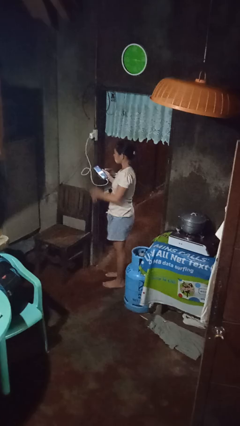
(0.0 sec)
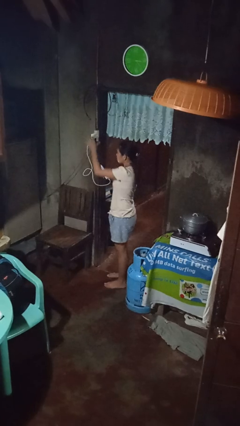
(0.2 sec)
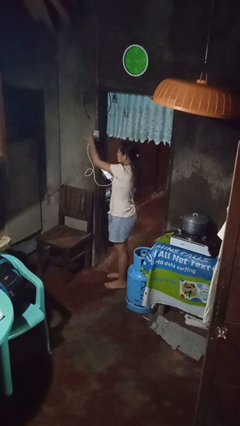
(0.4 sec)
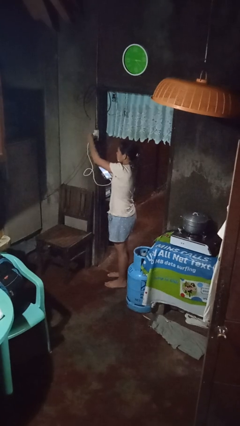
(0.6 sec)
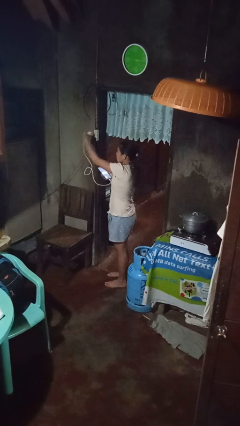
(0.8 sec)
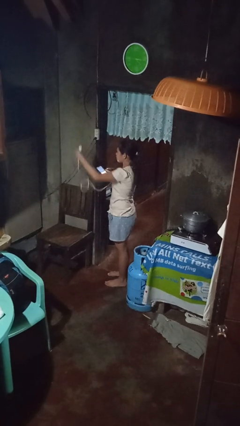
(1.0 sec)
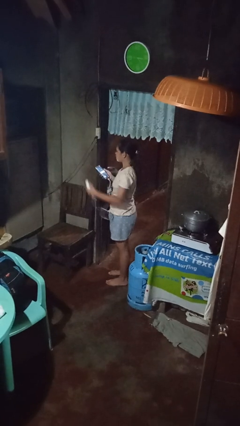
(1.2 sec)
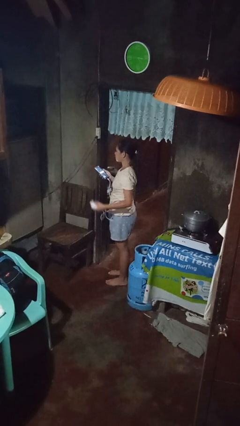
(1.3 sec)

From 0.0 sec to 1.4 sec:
person unplugs from electrical socket

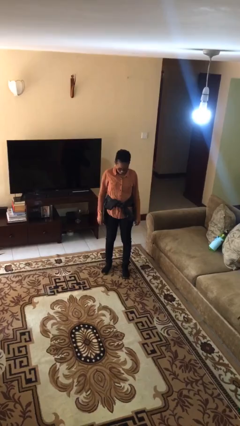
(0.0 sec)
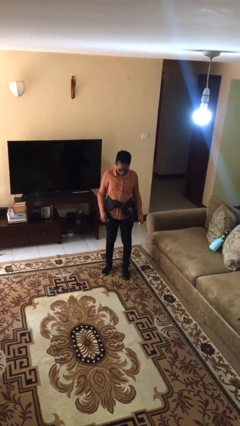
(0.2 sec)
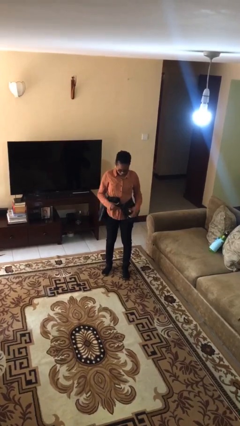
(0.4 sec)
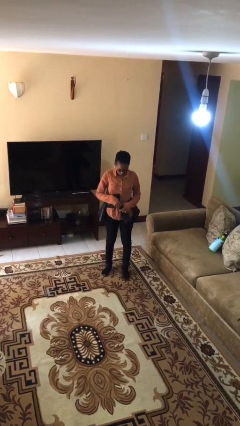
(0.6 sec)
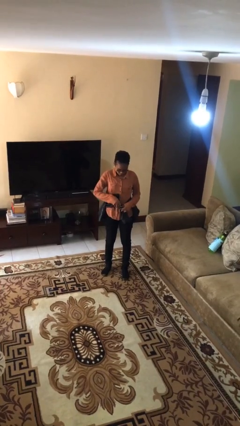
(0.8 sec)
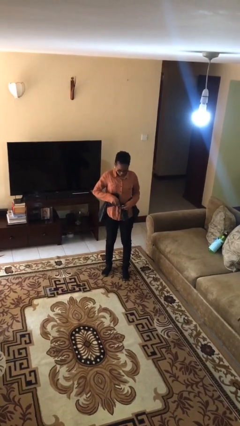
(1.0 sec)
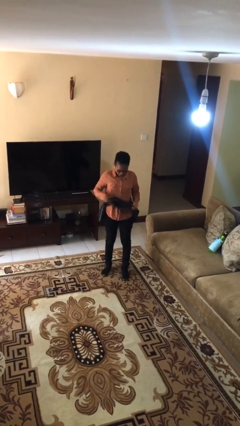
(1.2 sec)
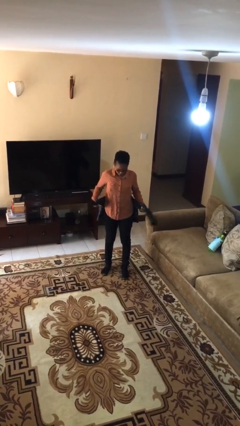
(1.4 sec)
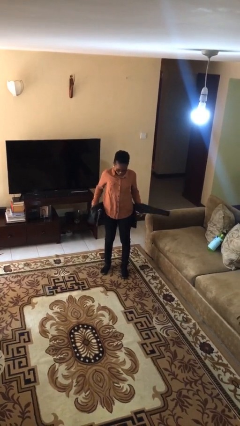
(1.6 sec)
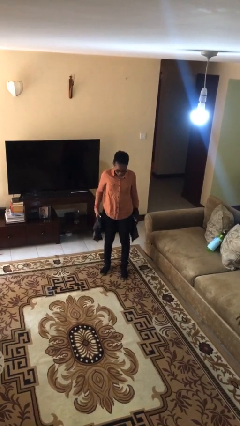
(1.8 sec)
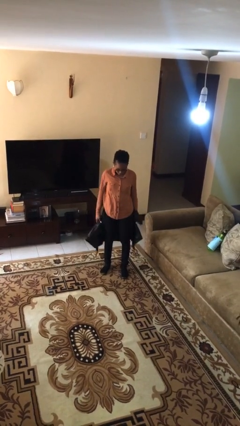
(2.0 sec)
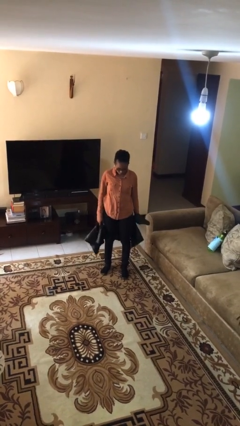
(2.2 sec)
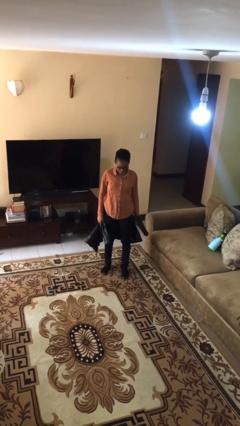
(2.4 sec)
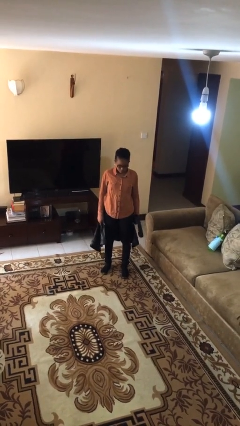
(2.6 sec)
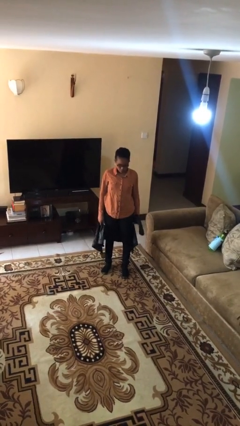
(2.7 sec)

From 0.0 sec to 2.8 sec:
person unties jacket around waist

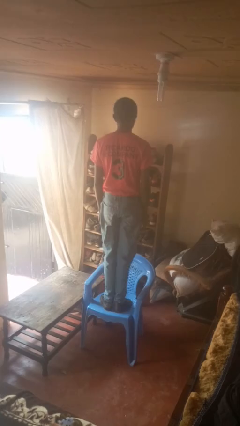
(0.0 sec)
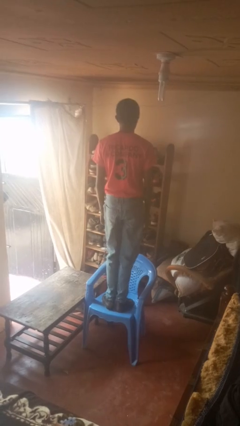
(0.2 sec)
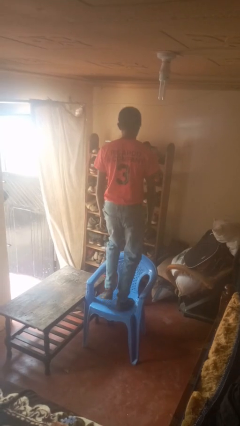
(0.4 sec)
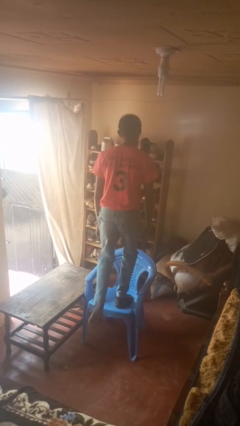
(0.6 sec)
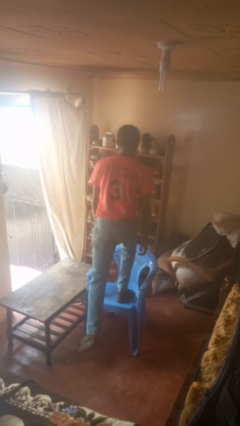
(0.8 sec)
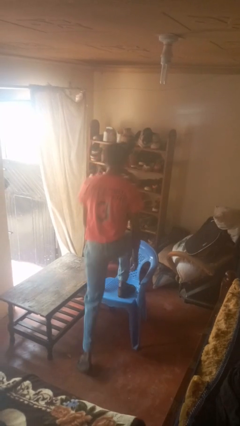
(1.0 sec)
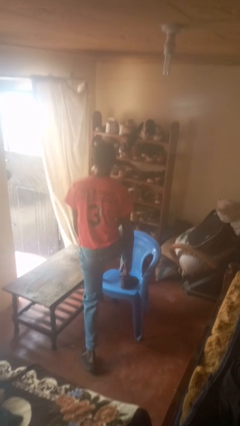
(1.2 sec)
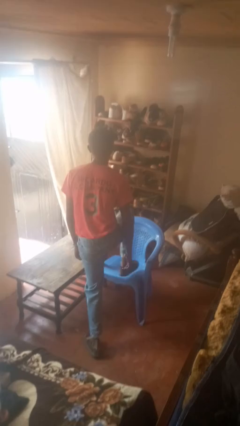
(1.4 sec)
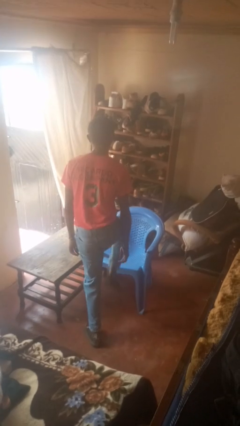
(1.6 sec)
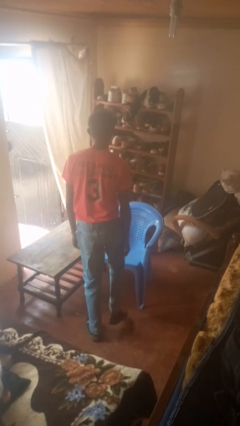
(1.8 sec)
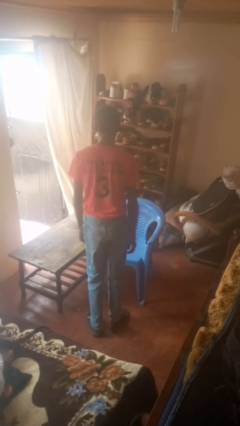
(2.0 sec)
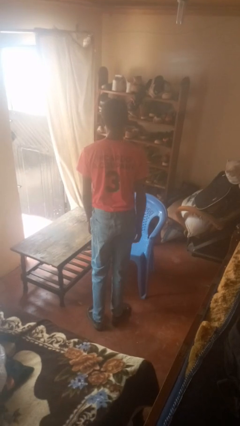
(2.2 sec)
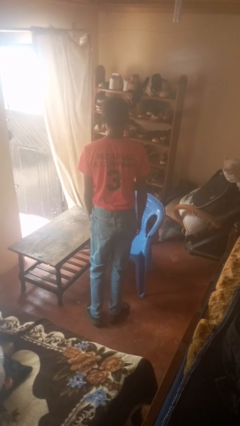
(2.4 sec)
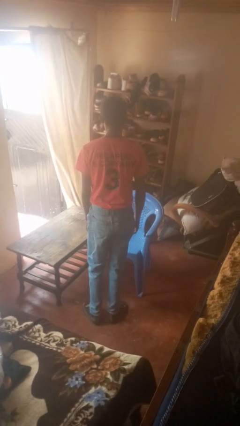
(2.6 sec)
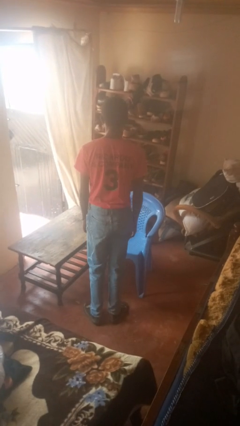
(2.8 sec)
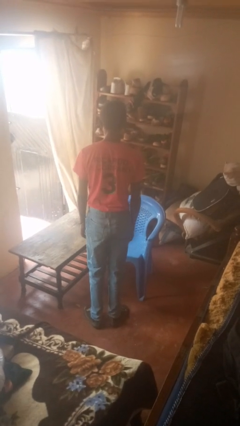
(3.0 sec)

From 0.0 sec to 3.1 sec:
person climbs off chair

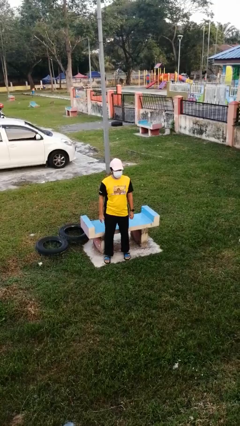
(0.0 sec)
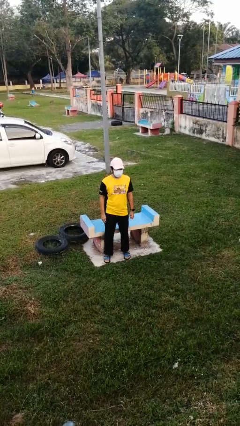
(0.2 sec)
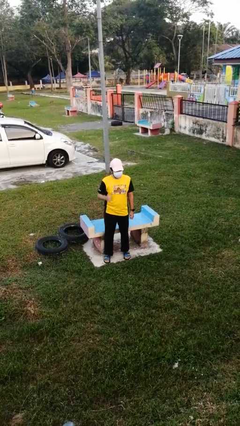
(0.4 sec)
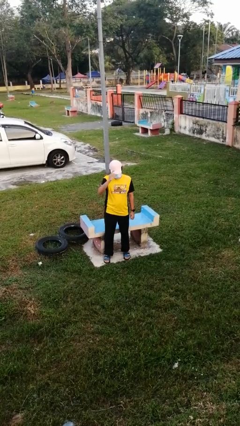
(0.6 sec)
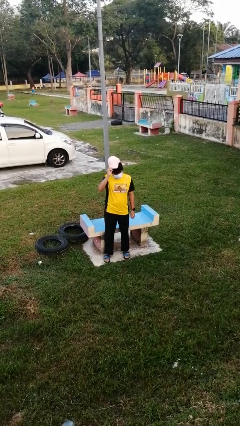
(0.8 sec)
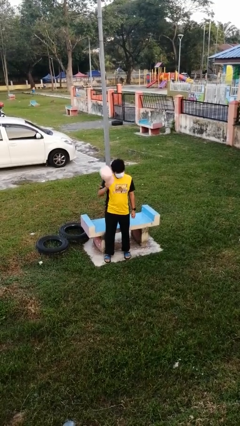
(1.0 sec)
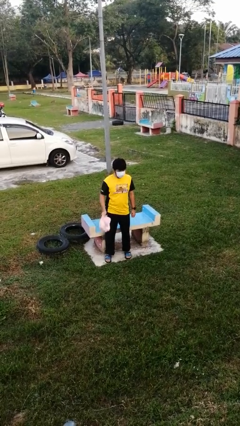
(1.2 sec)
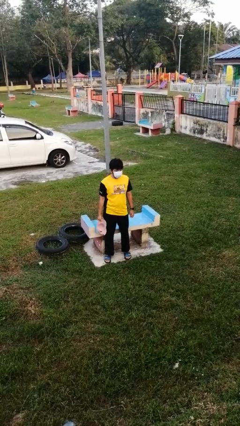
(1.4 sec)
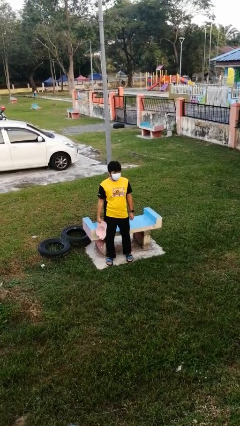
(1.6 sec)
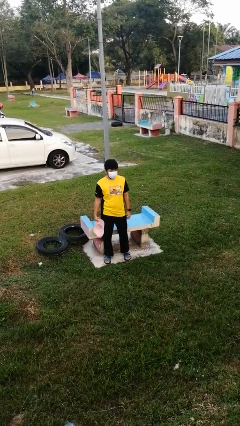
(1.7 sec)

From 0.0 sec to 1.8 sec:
person takes off hat

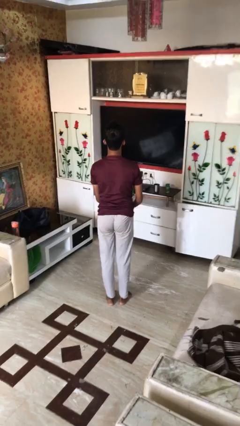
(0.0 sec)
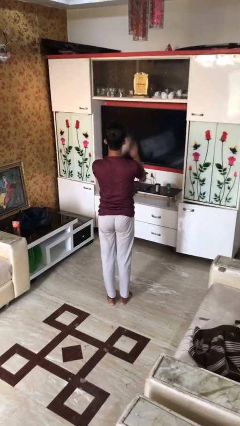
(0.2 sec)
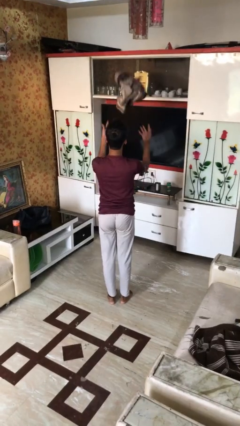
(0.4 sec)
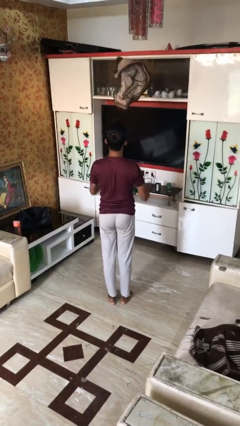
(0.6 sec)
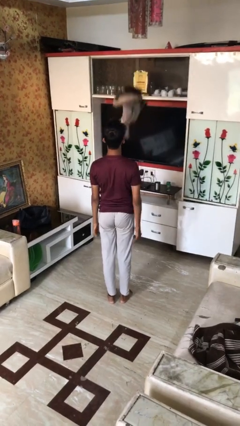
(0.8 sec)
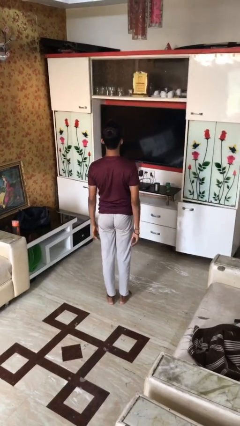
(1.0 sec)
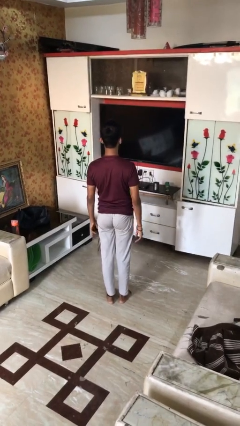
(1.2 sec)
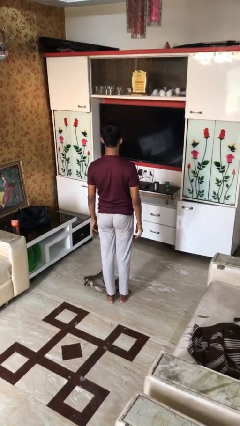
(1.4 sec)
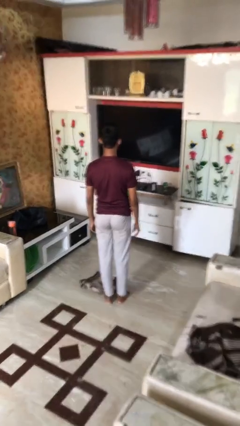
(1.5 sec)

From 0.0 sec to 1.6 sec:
person throws object into air

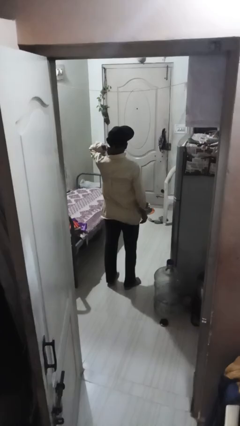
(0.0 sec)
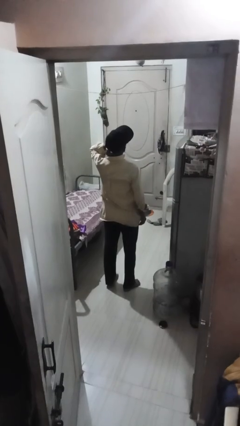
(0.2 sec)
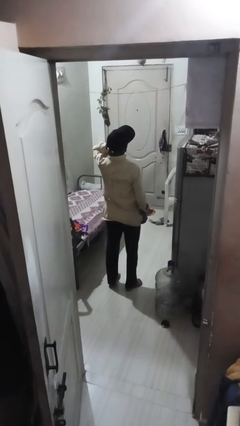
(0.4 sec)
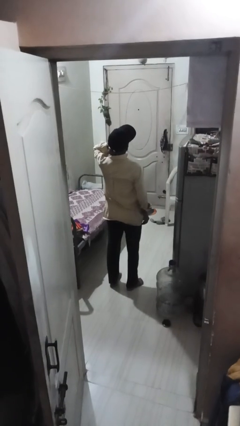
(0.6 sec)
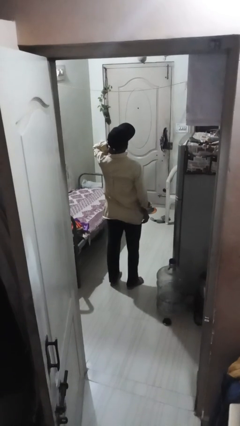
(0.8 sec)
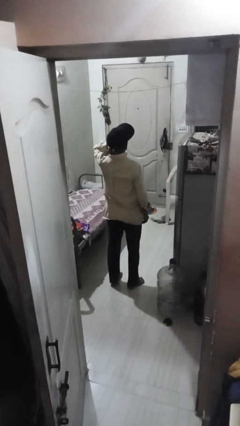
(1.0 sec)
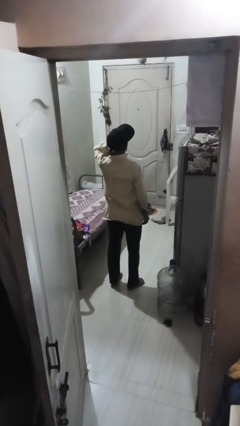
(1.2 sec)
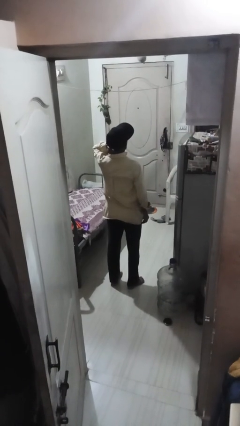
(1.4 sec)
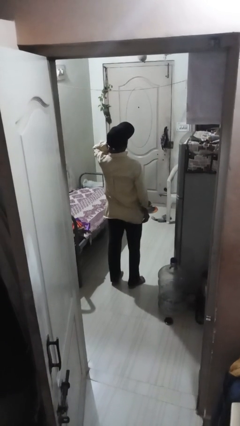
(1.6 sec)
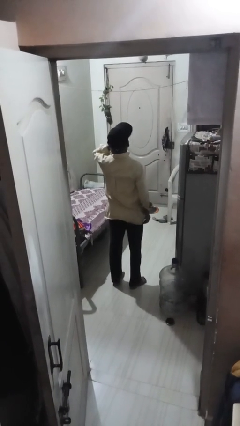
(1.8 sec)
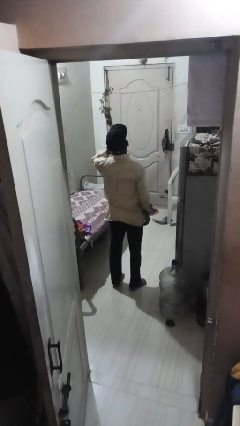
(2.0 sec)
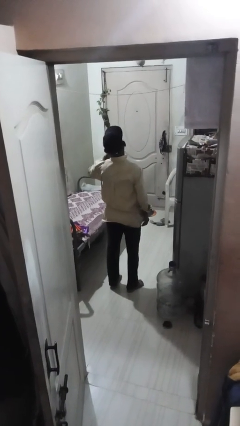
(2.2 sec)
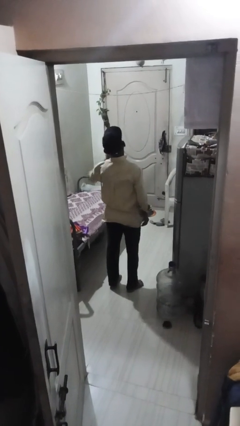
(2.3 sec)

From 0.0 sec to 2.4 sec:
person rubs neck

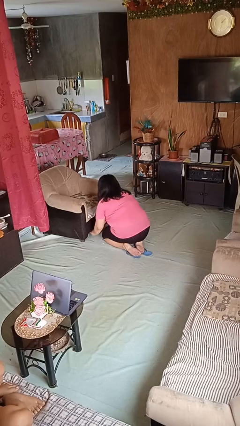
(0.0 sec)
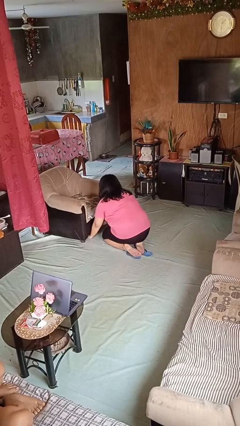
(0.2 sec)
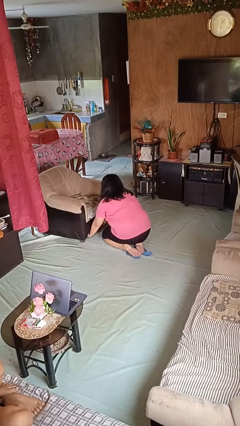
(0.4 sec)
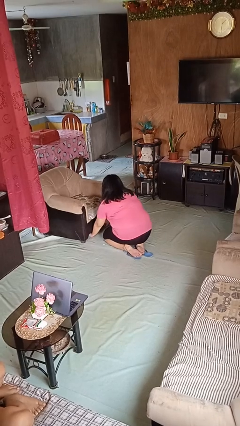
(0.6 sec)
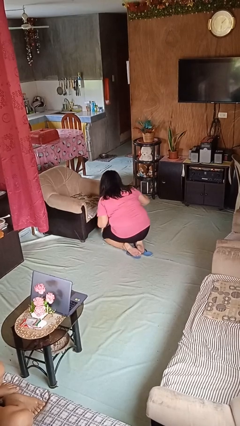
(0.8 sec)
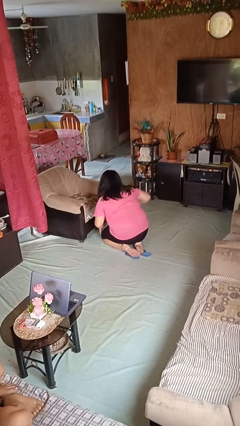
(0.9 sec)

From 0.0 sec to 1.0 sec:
person searches under couch

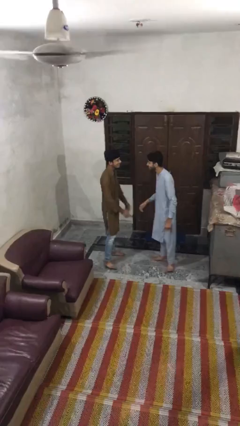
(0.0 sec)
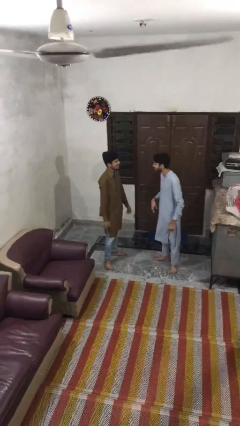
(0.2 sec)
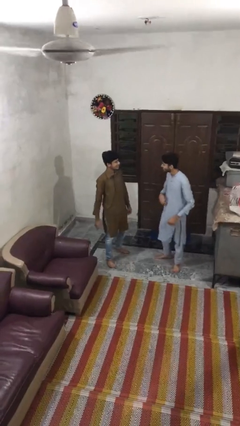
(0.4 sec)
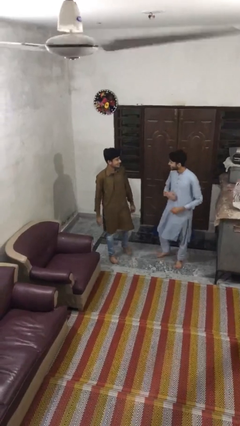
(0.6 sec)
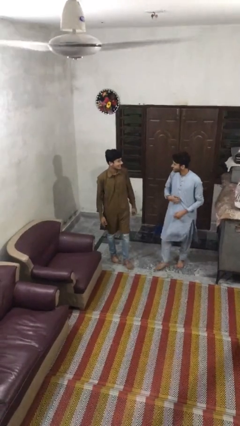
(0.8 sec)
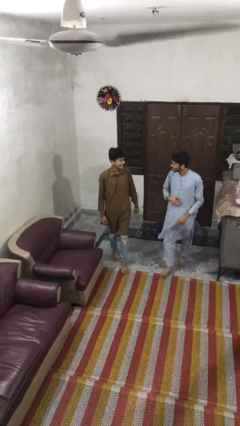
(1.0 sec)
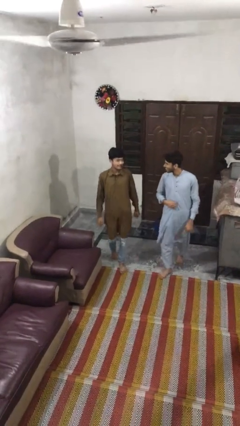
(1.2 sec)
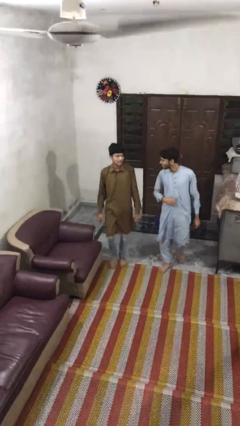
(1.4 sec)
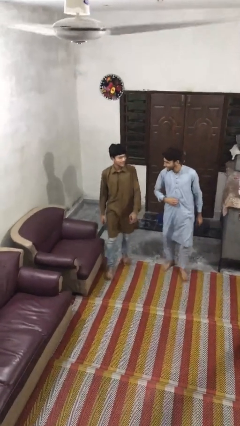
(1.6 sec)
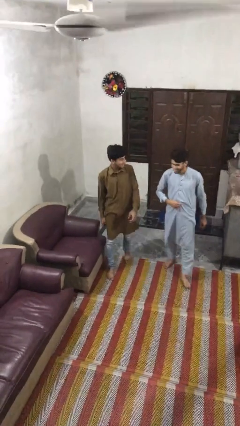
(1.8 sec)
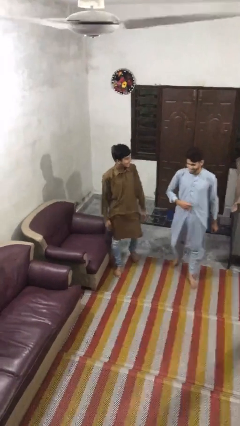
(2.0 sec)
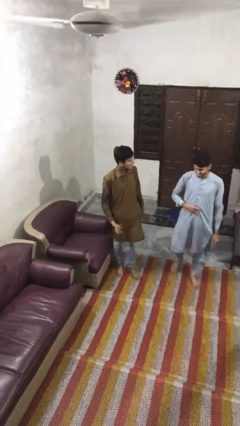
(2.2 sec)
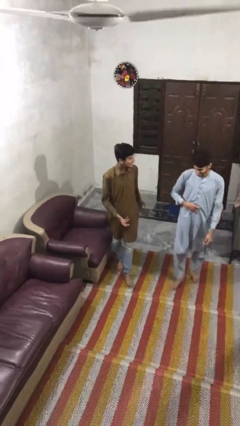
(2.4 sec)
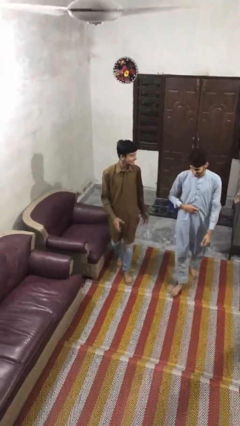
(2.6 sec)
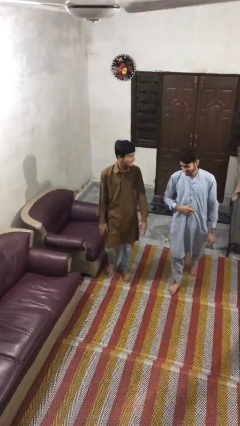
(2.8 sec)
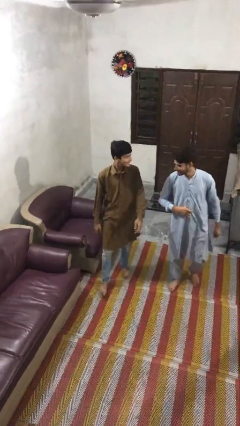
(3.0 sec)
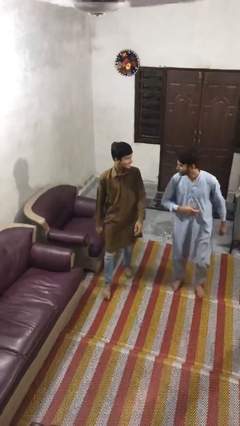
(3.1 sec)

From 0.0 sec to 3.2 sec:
person talks to person
